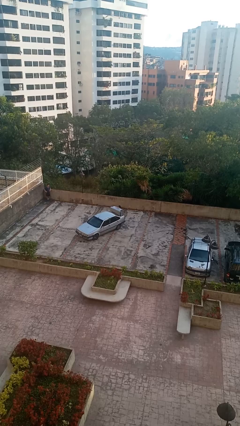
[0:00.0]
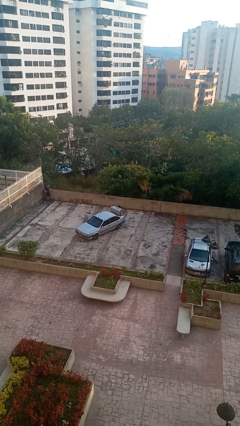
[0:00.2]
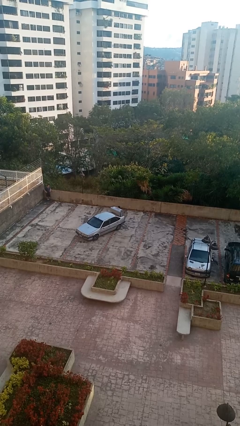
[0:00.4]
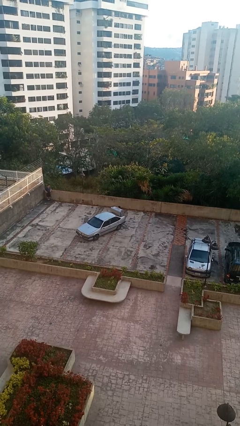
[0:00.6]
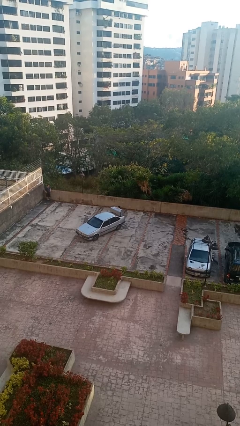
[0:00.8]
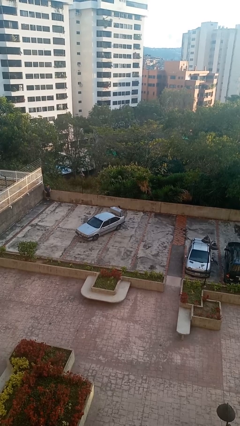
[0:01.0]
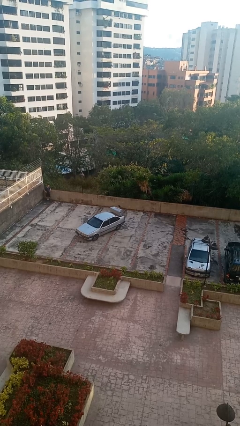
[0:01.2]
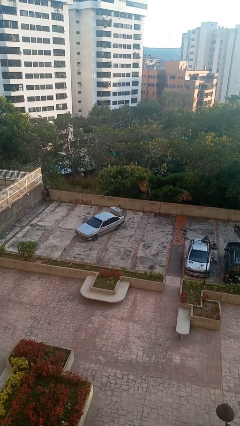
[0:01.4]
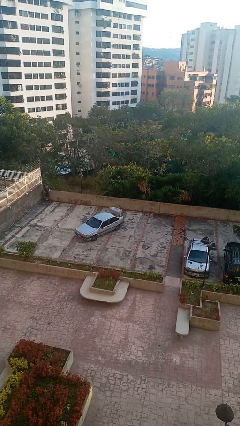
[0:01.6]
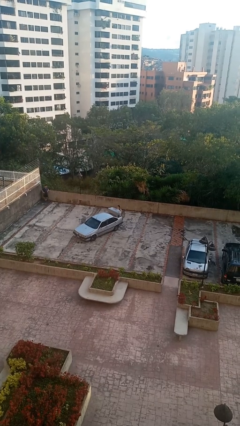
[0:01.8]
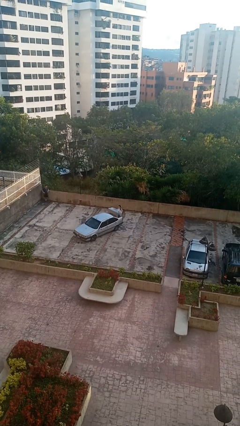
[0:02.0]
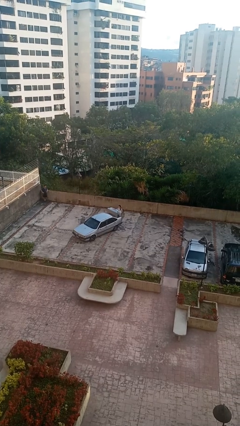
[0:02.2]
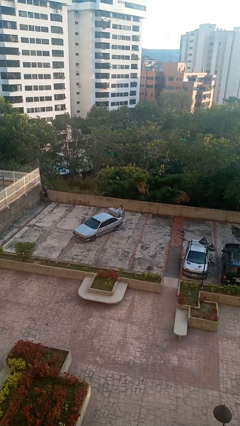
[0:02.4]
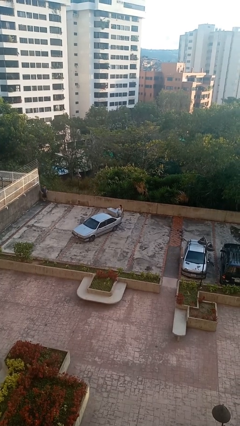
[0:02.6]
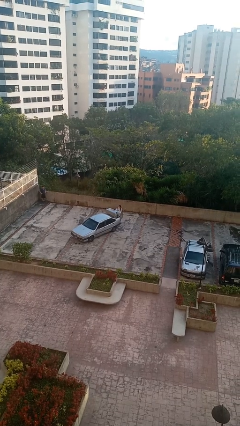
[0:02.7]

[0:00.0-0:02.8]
person unloads car

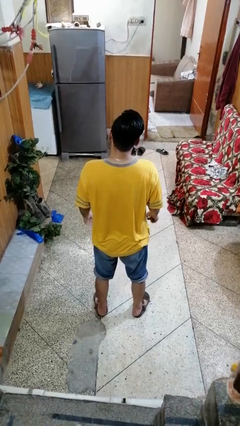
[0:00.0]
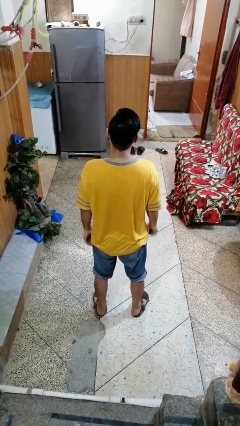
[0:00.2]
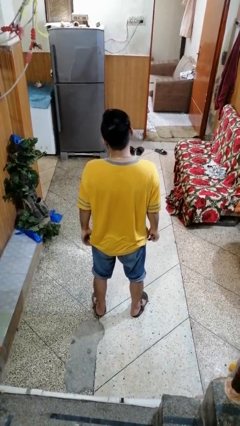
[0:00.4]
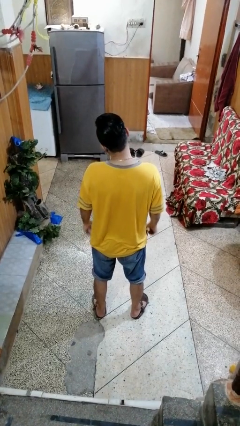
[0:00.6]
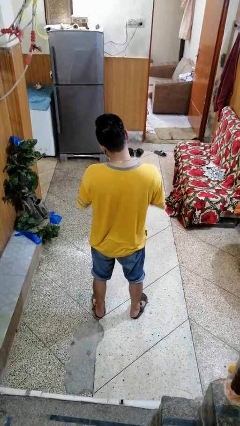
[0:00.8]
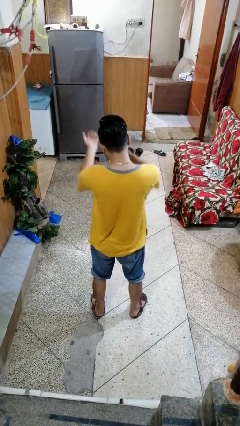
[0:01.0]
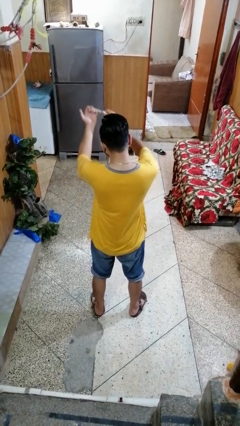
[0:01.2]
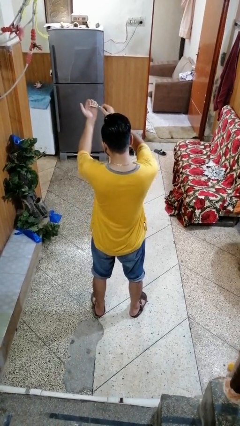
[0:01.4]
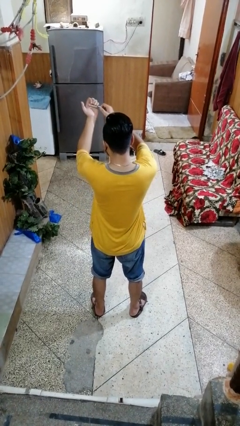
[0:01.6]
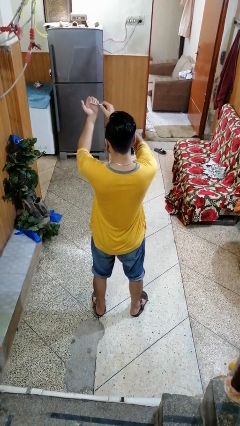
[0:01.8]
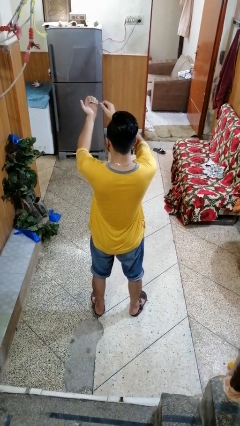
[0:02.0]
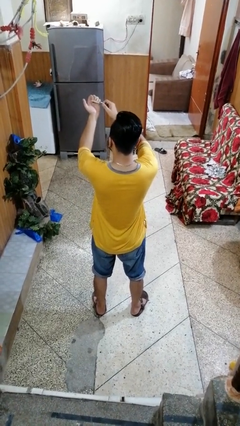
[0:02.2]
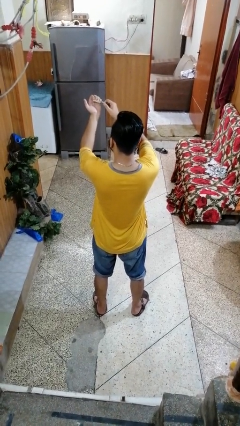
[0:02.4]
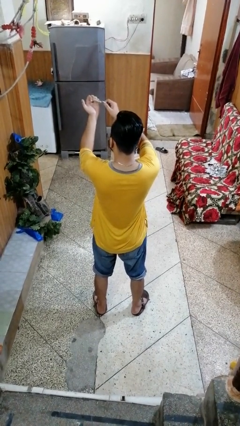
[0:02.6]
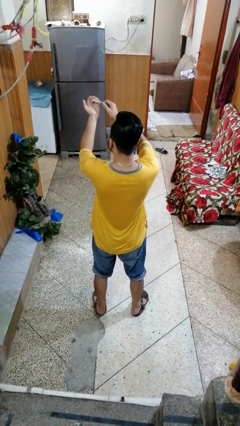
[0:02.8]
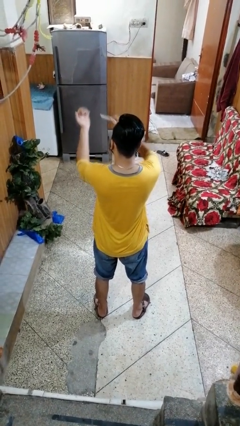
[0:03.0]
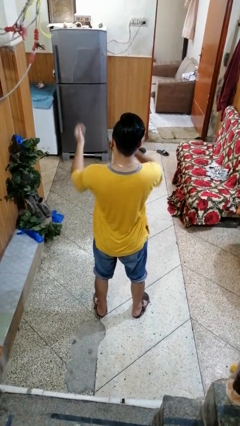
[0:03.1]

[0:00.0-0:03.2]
person files fingernails

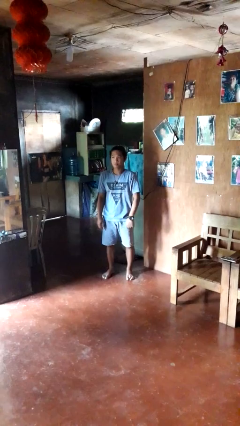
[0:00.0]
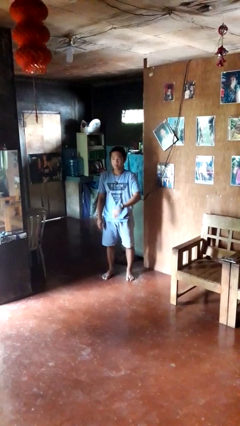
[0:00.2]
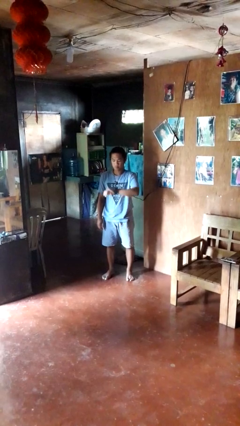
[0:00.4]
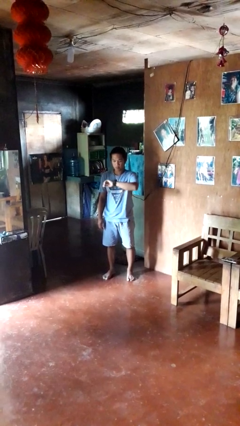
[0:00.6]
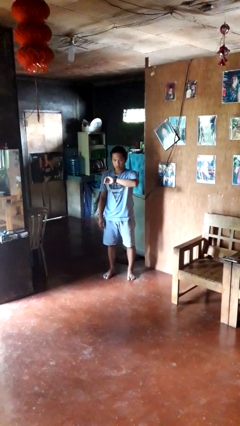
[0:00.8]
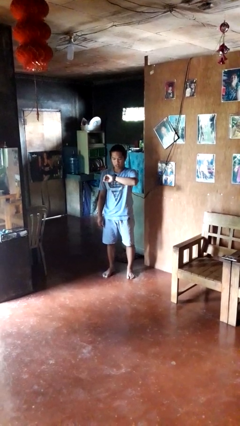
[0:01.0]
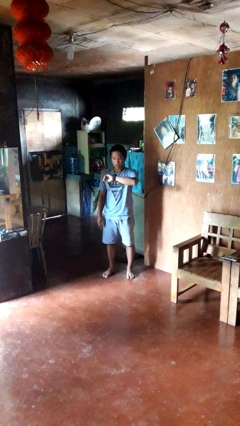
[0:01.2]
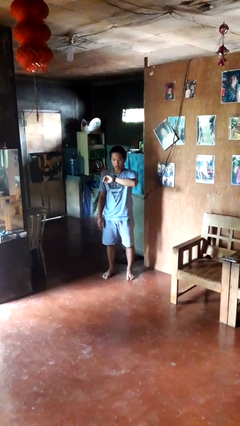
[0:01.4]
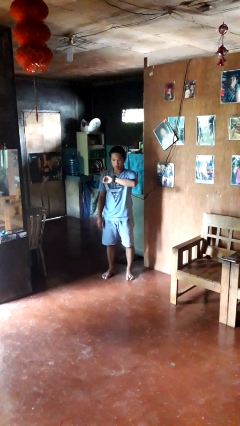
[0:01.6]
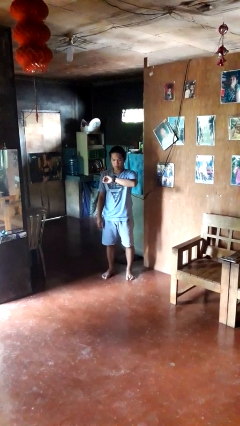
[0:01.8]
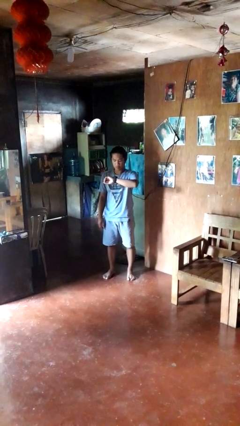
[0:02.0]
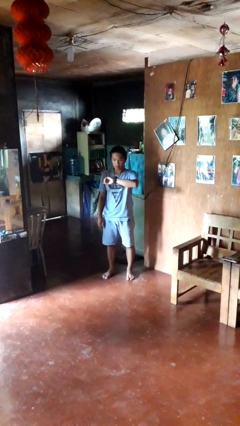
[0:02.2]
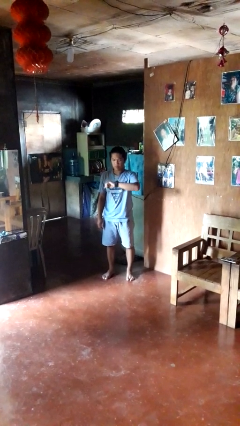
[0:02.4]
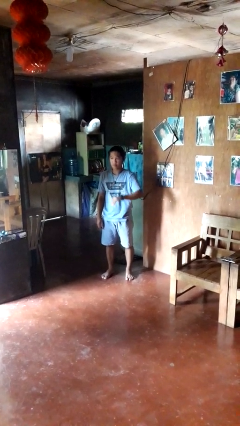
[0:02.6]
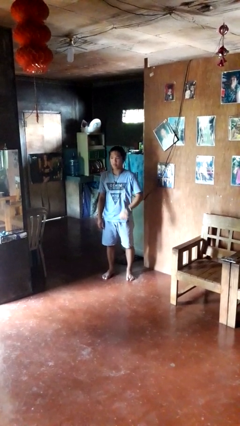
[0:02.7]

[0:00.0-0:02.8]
person looks at wristwatch

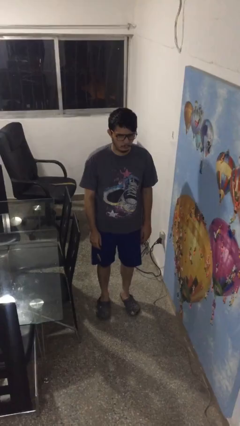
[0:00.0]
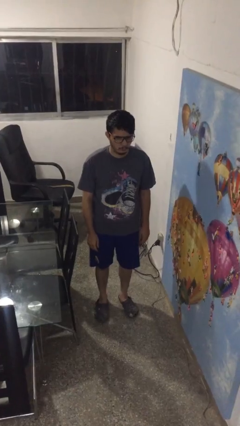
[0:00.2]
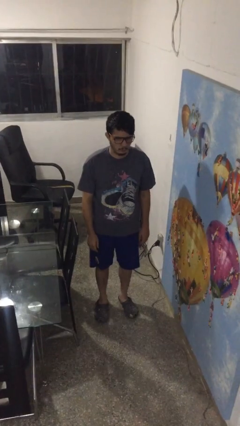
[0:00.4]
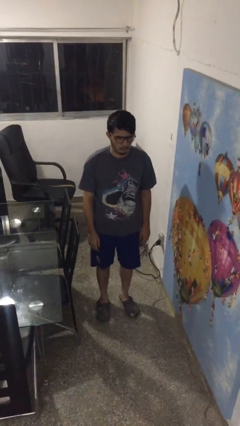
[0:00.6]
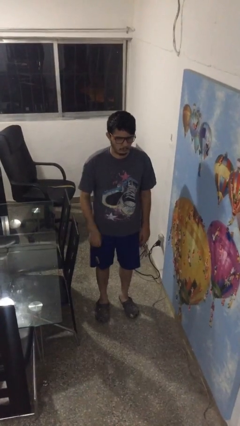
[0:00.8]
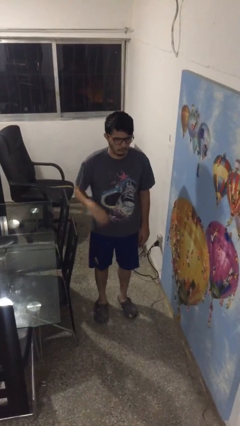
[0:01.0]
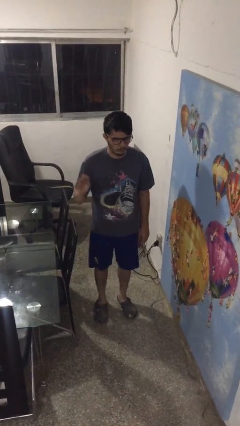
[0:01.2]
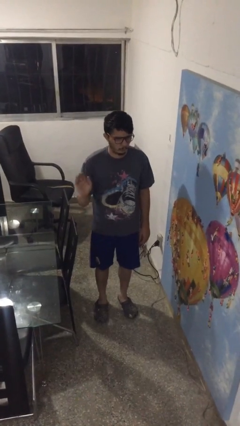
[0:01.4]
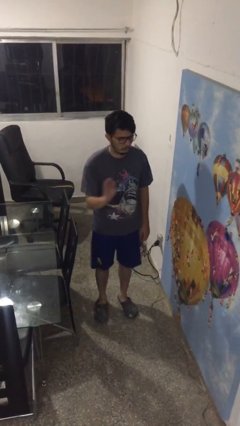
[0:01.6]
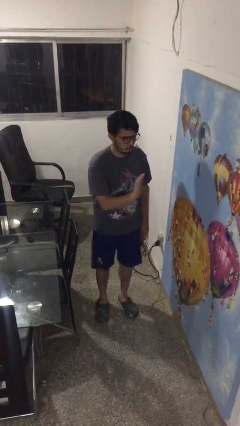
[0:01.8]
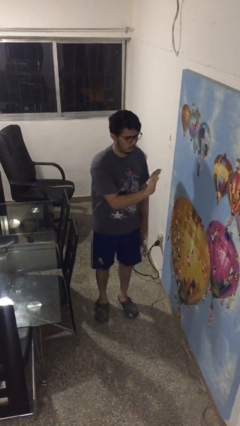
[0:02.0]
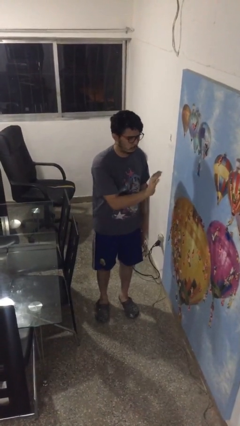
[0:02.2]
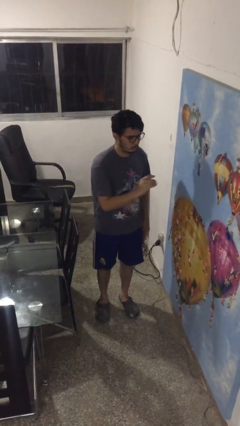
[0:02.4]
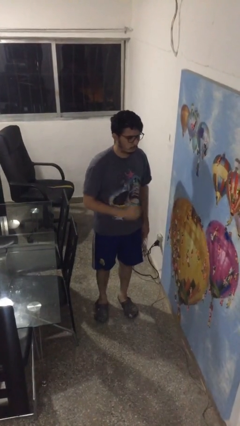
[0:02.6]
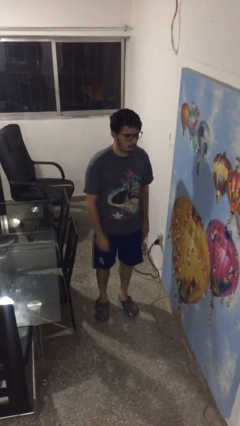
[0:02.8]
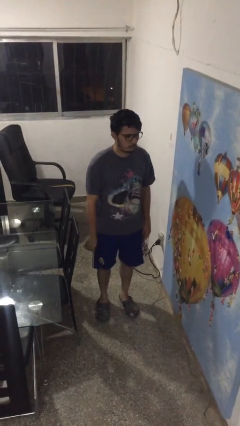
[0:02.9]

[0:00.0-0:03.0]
person gestures swipe left

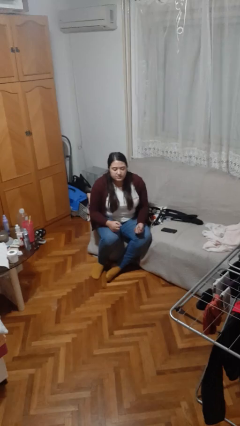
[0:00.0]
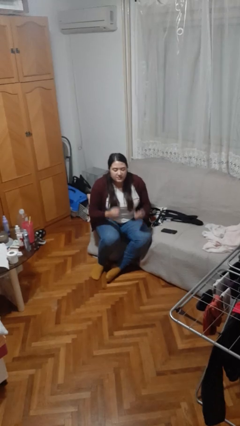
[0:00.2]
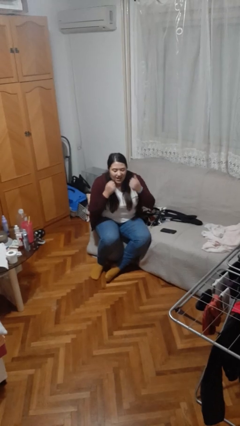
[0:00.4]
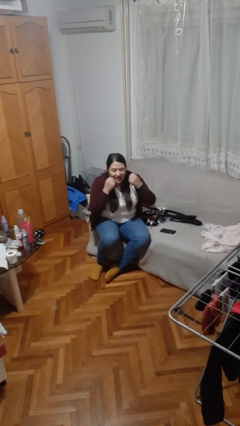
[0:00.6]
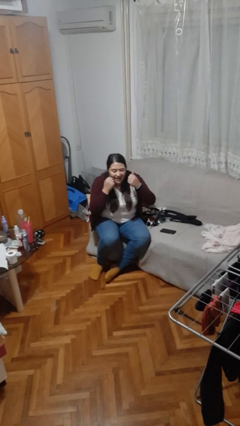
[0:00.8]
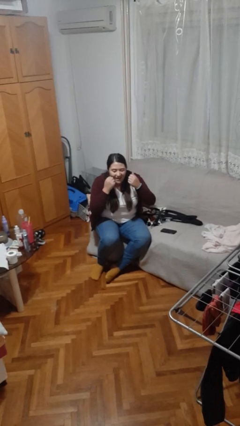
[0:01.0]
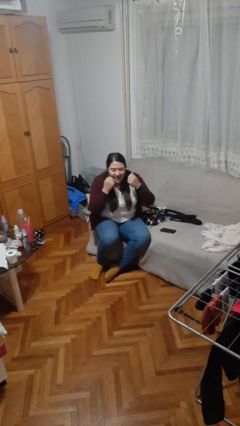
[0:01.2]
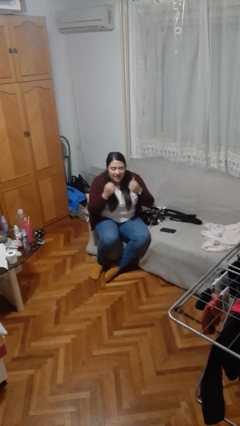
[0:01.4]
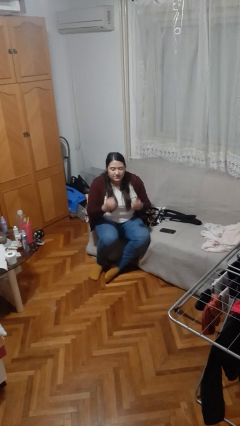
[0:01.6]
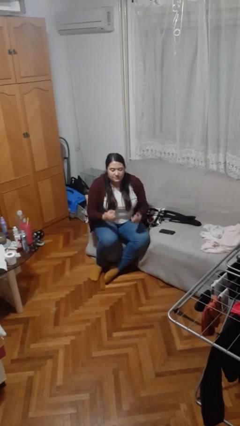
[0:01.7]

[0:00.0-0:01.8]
person flosses

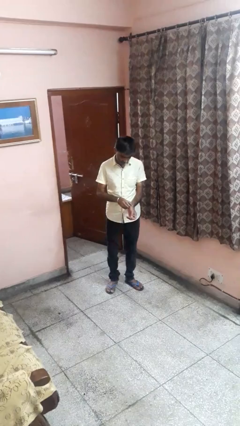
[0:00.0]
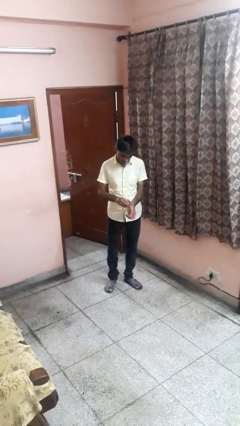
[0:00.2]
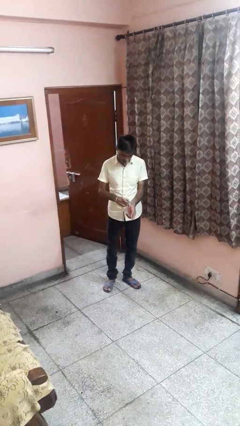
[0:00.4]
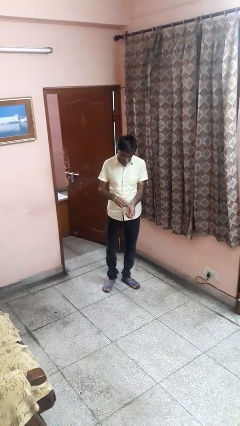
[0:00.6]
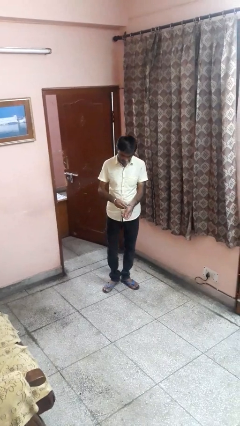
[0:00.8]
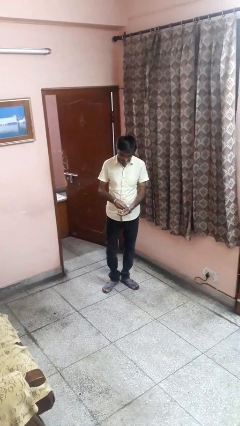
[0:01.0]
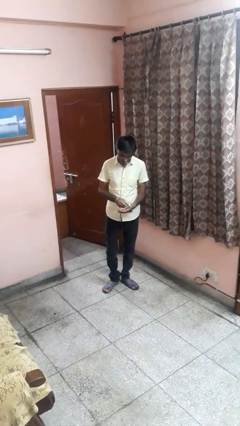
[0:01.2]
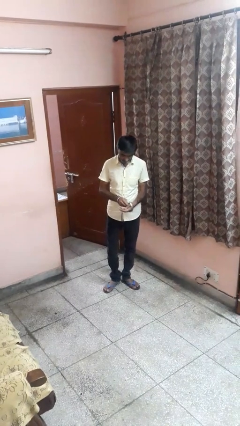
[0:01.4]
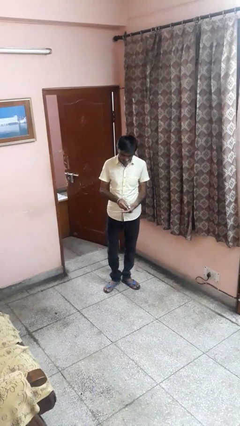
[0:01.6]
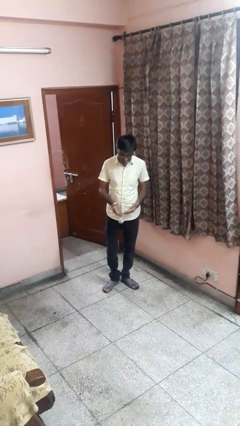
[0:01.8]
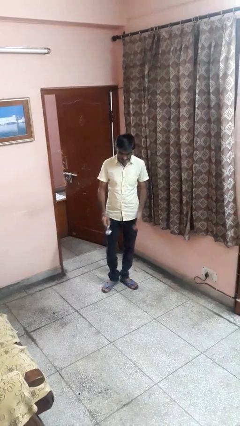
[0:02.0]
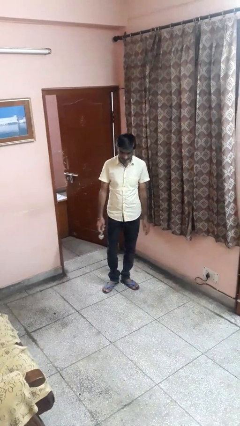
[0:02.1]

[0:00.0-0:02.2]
person takes off wristwatch

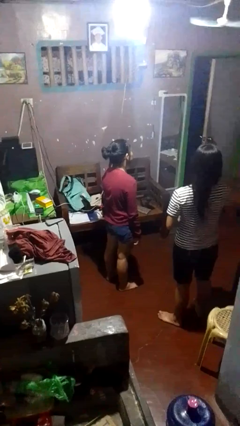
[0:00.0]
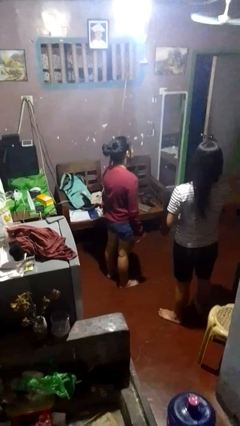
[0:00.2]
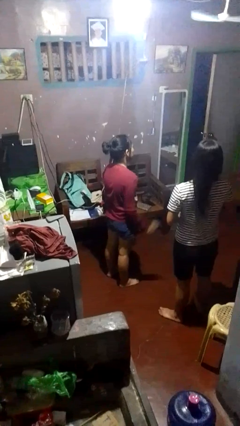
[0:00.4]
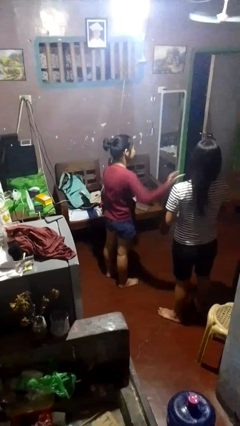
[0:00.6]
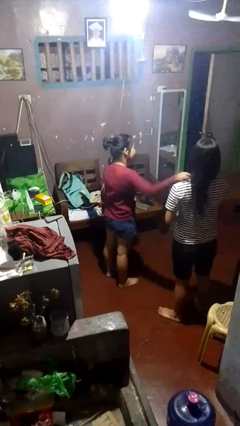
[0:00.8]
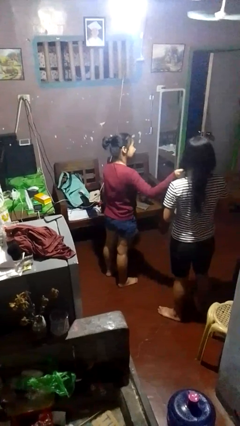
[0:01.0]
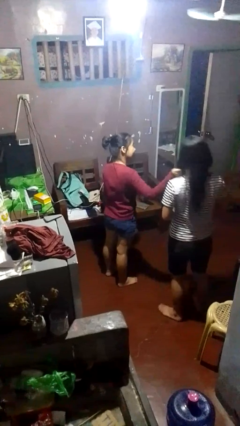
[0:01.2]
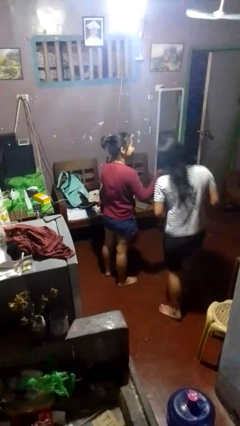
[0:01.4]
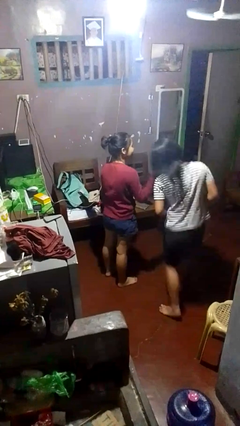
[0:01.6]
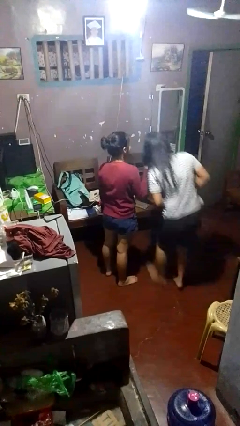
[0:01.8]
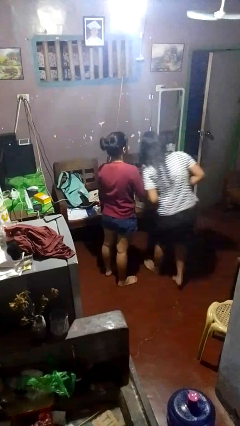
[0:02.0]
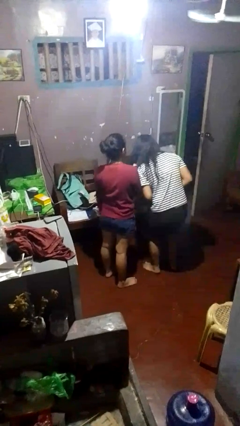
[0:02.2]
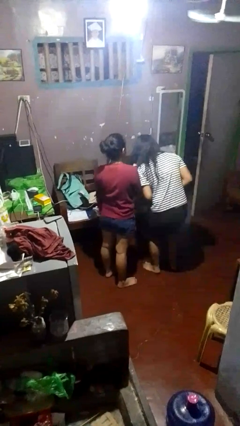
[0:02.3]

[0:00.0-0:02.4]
person grabs person by hair
